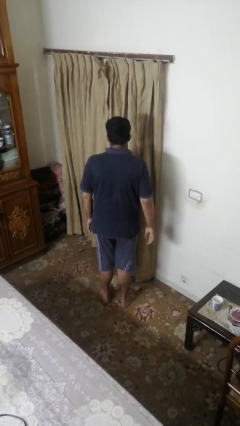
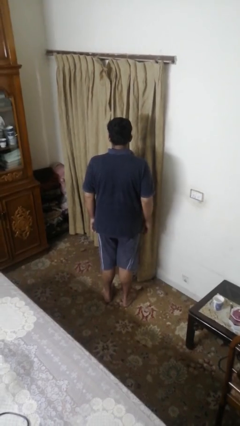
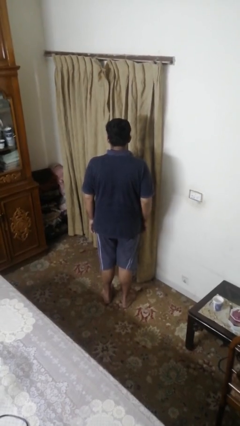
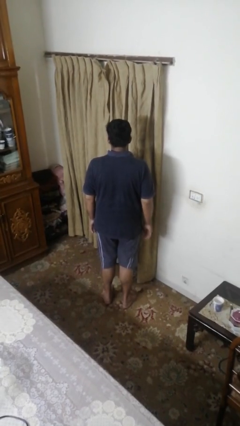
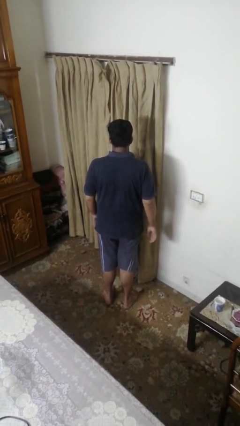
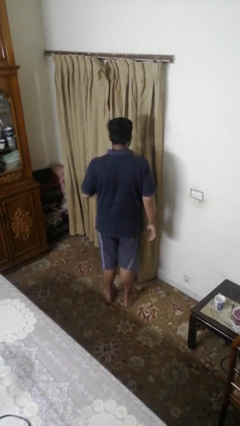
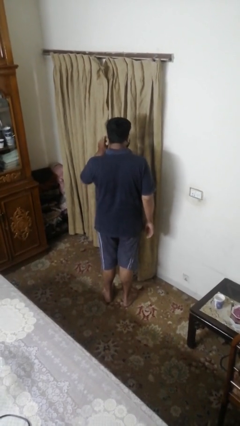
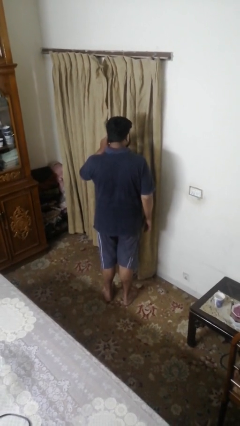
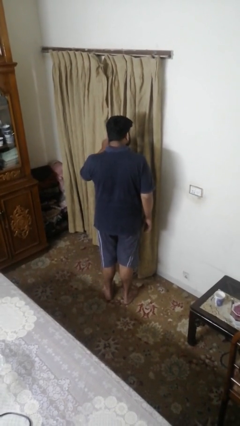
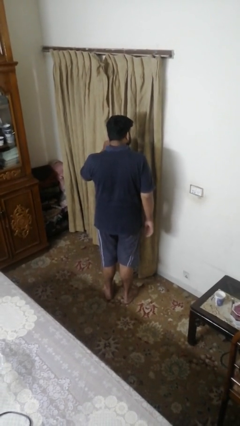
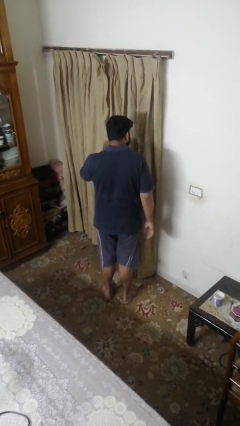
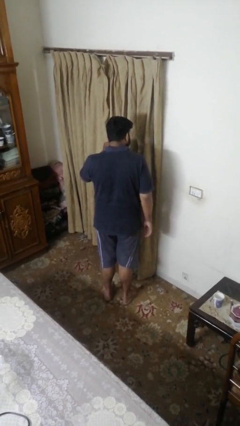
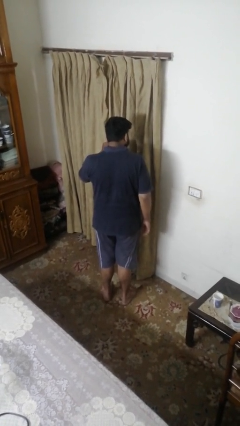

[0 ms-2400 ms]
person gestures listen closely

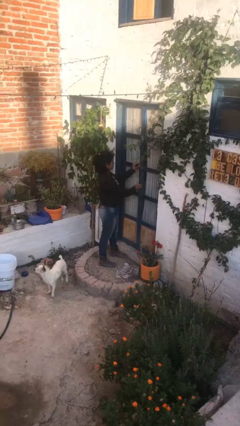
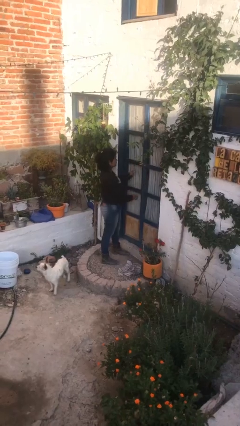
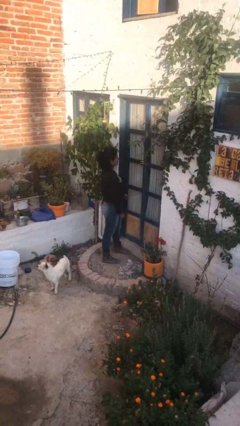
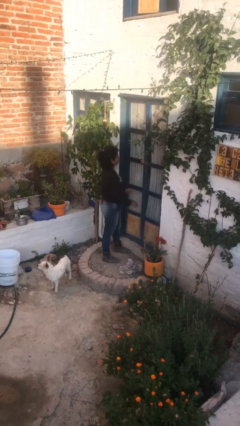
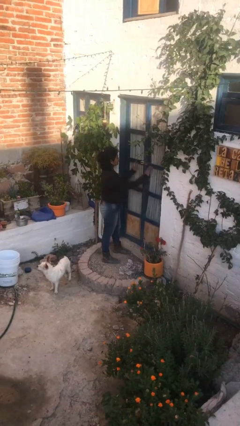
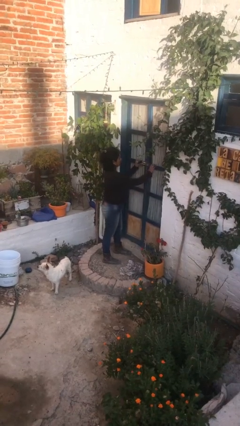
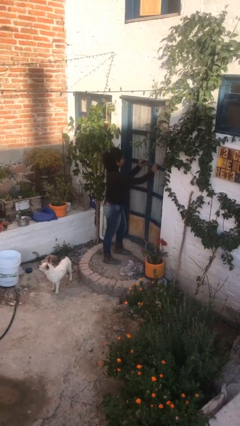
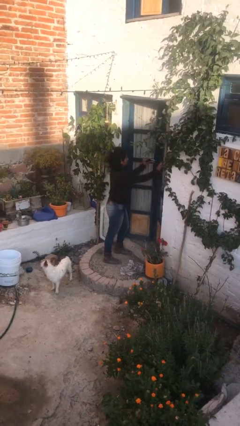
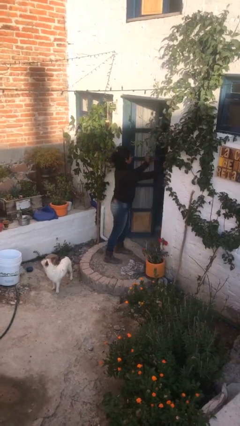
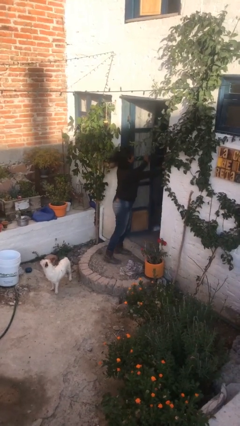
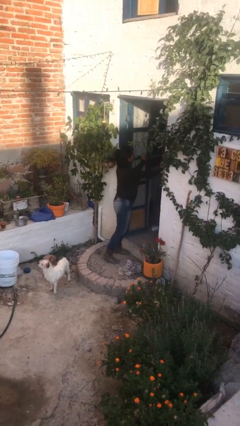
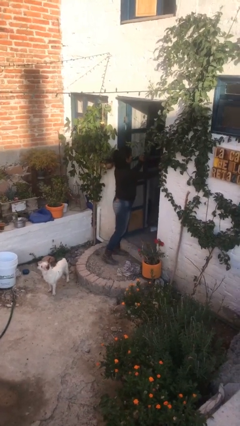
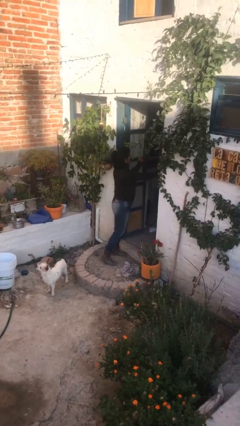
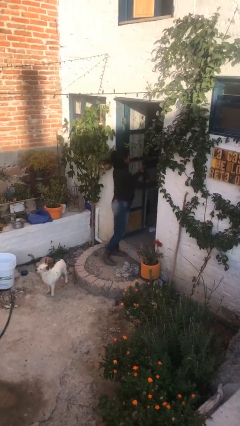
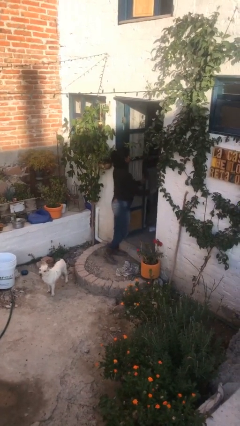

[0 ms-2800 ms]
person opens facility door

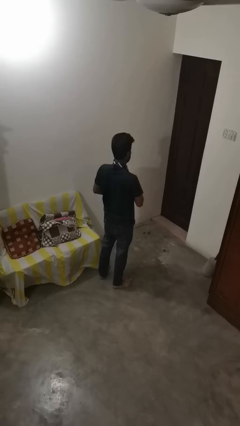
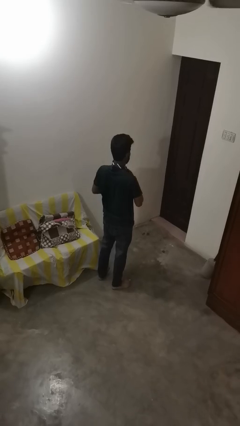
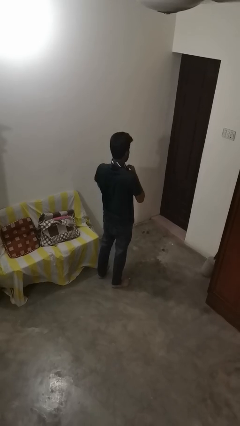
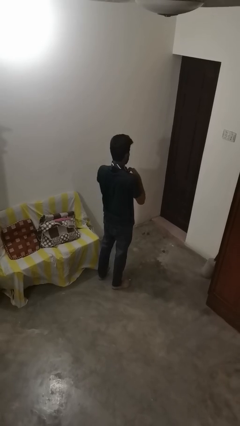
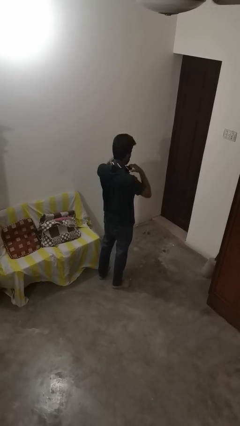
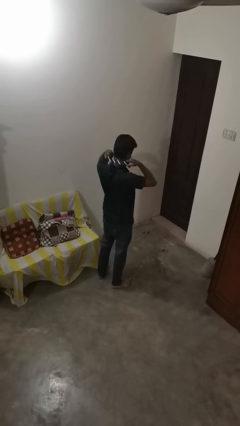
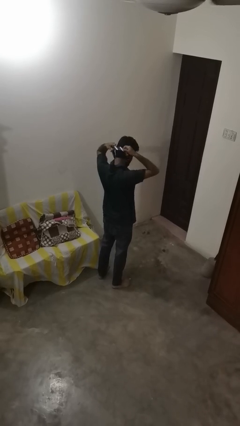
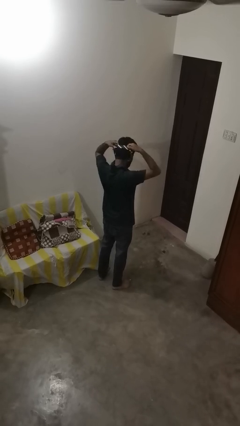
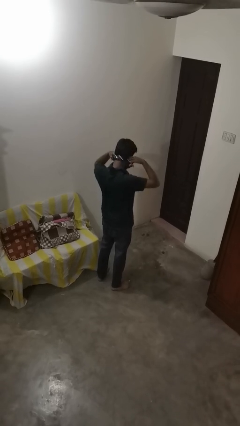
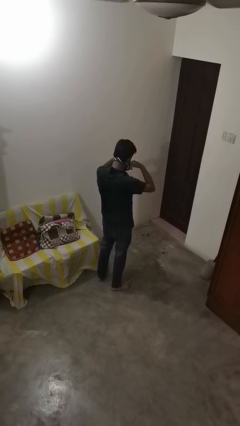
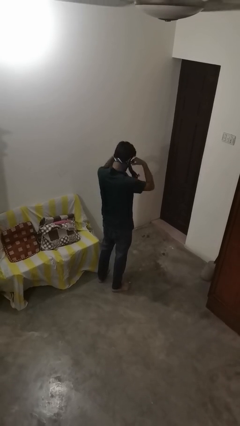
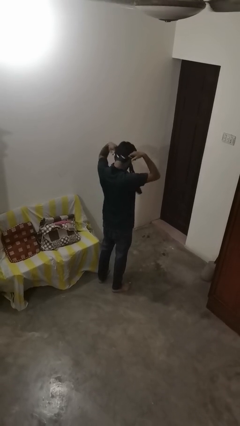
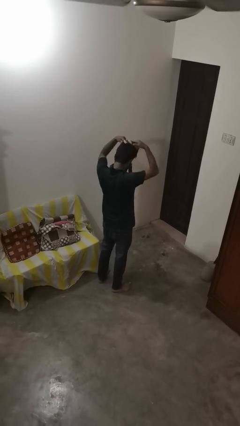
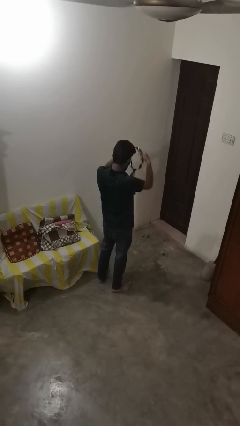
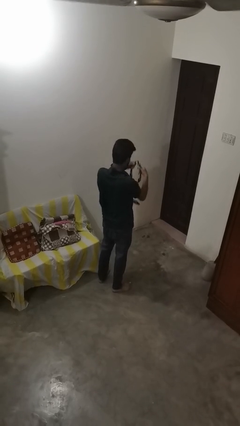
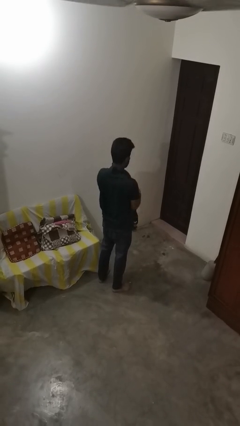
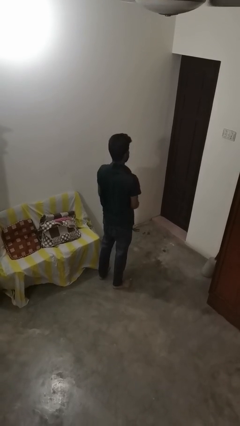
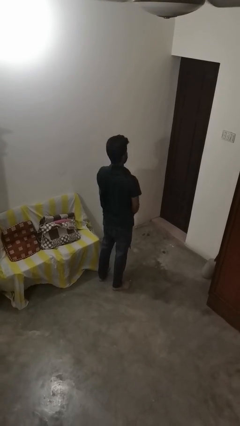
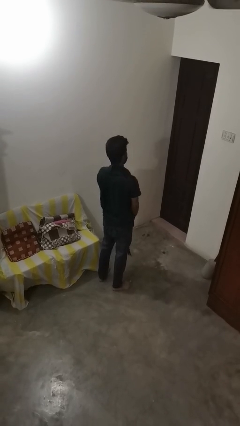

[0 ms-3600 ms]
person takes off necktie

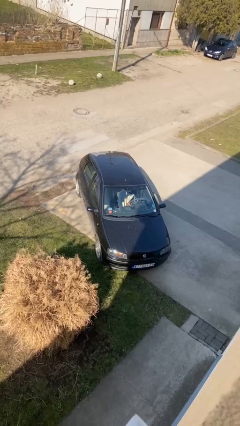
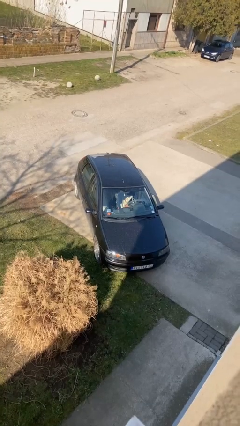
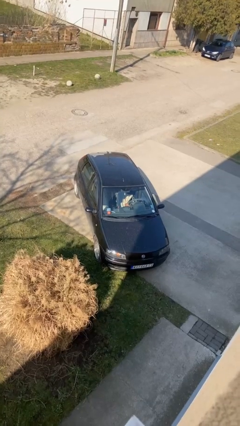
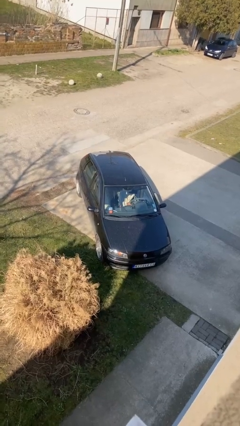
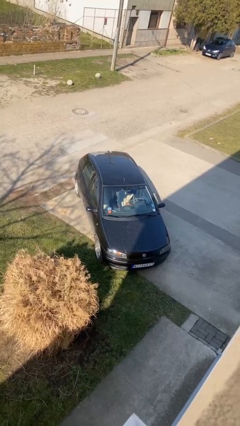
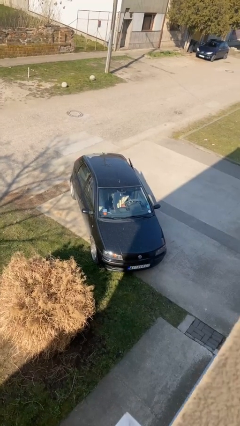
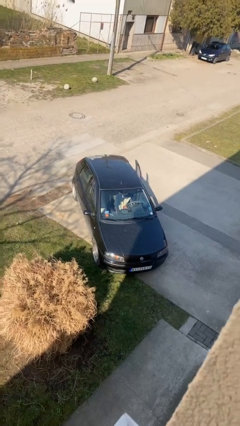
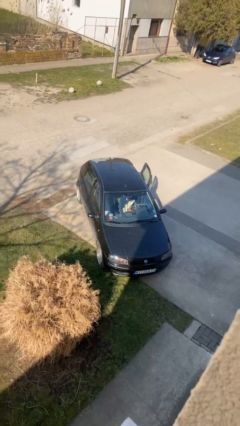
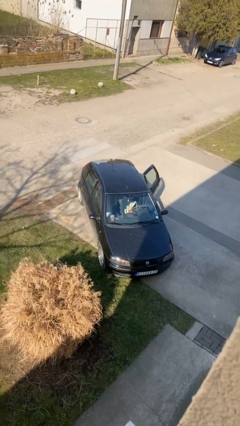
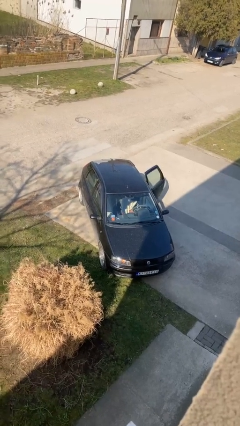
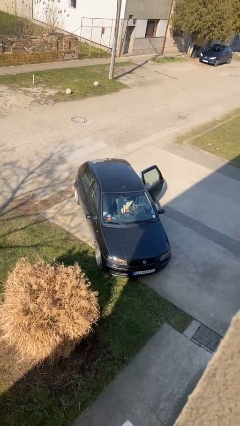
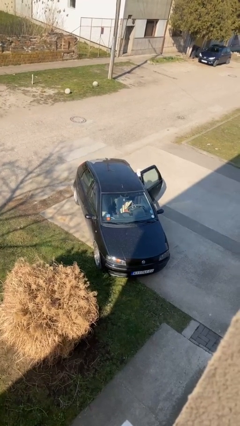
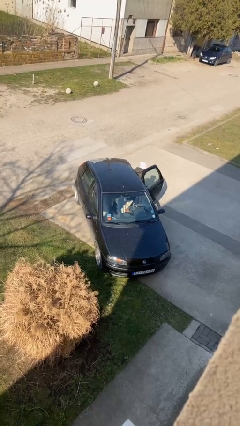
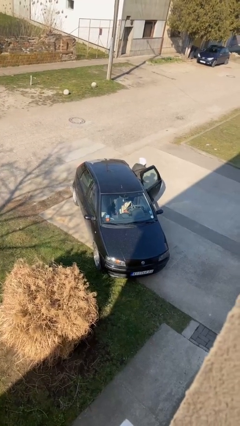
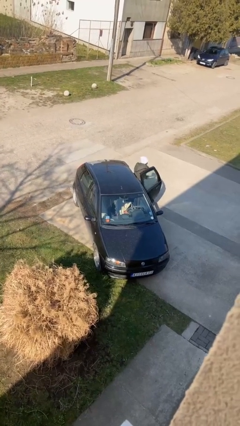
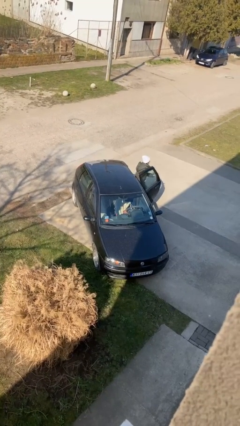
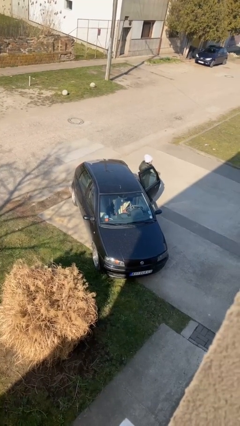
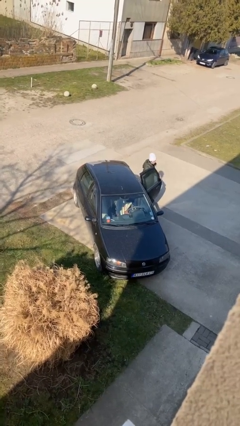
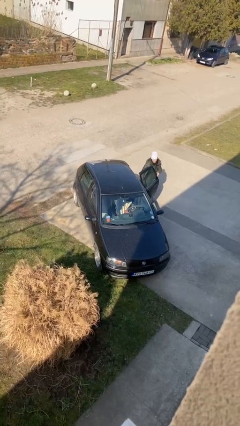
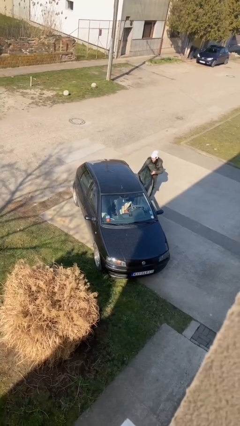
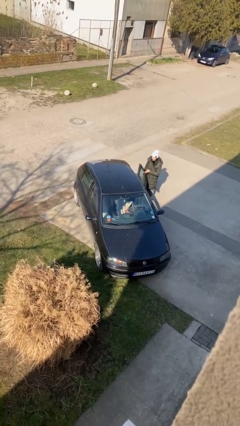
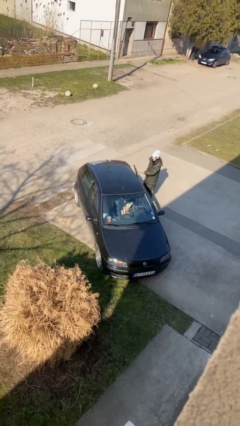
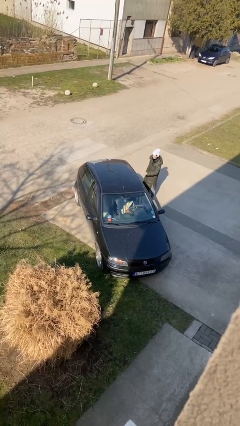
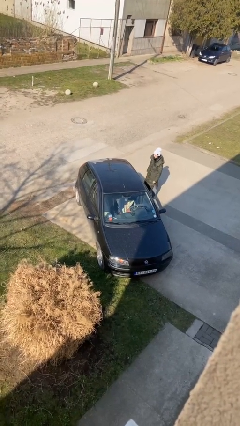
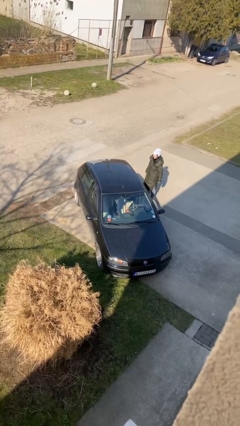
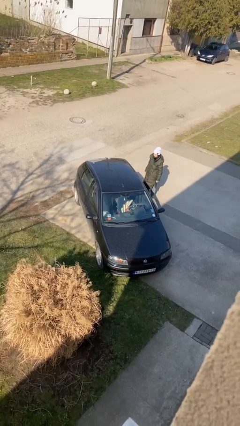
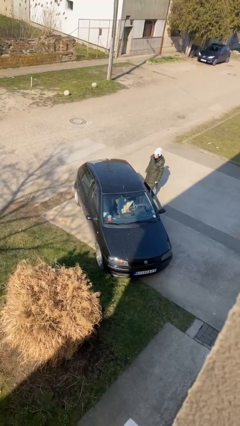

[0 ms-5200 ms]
car drops off person

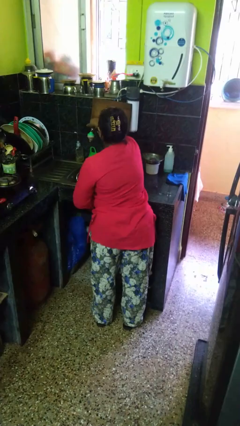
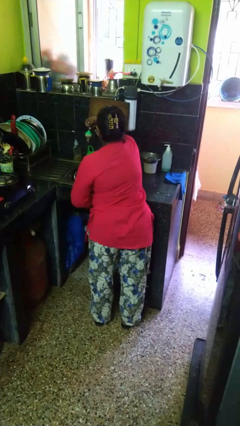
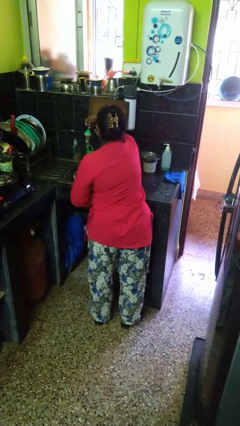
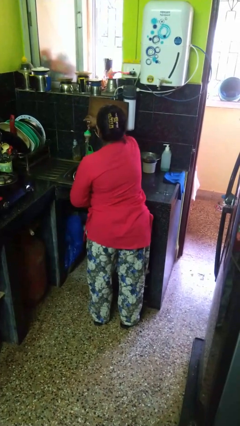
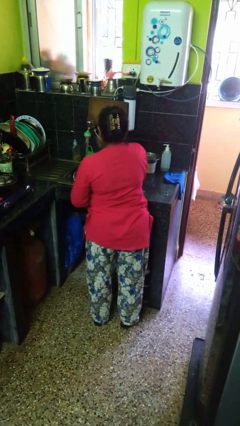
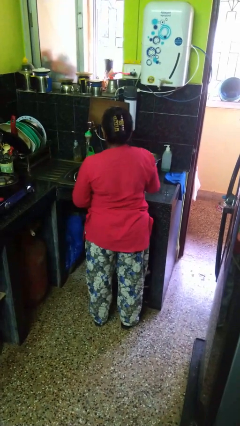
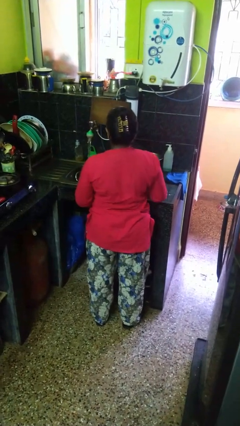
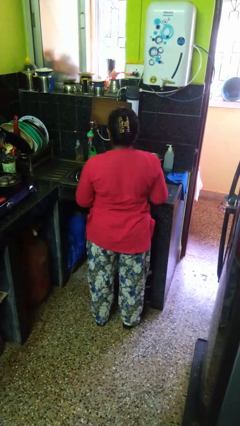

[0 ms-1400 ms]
person turns on faucet

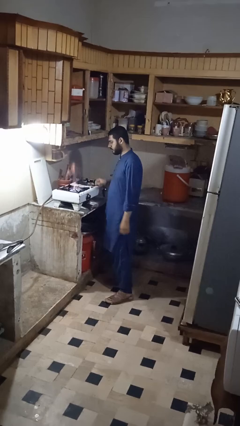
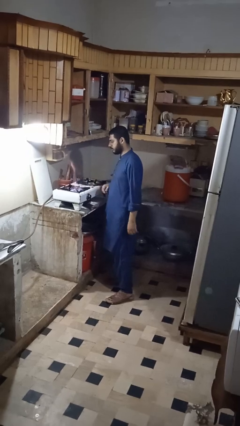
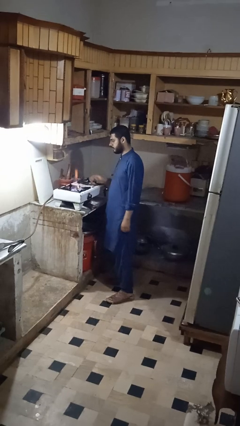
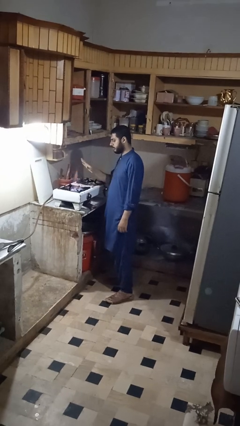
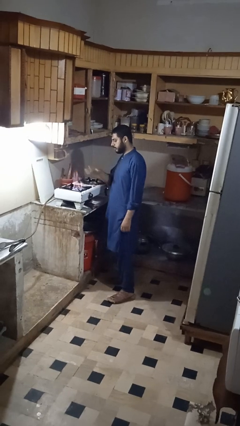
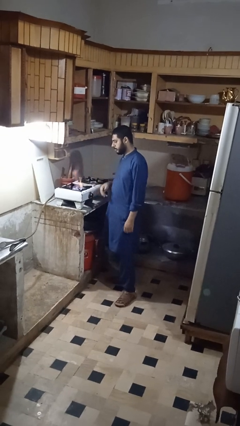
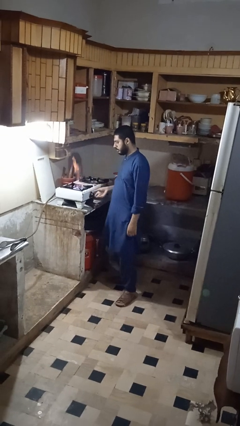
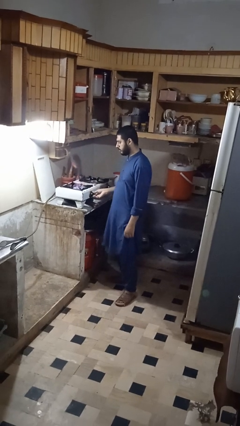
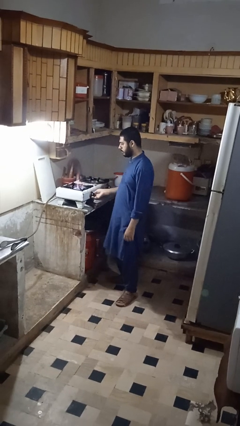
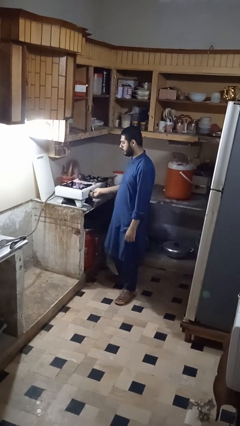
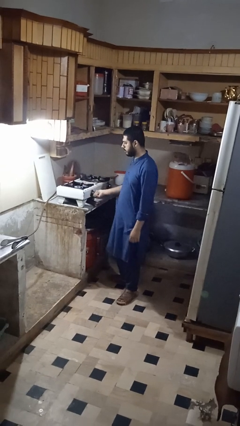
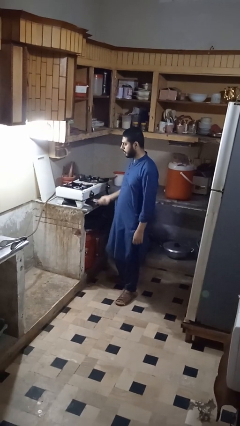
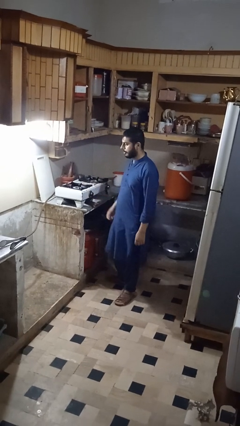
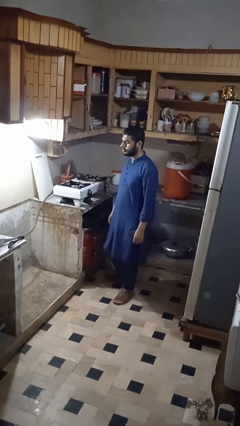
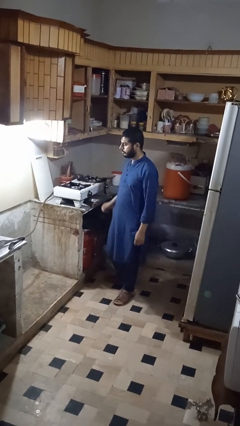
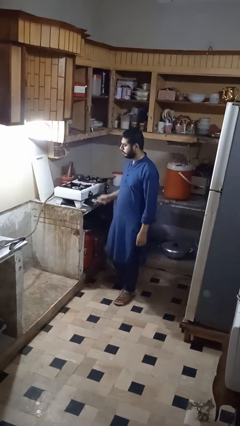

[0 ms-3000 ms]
person turns off stovetop
